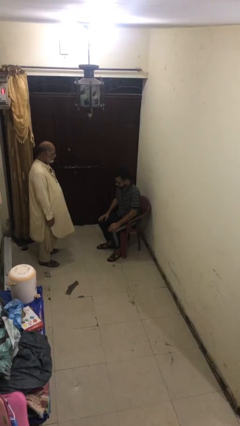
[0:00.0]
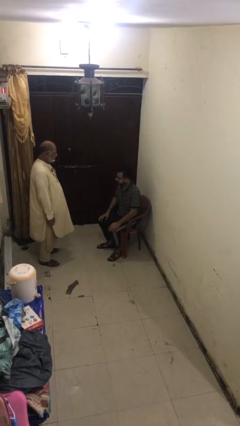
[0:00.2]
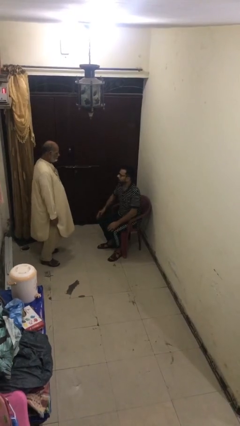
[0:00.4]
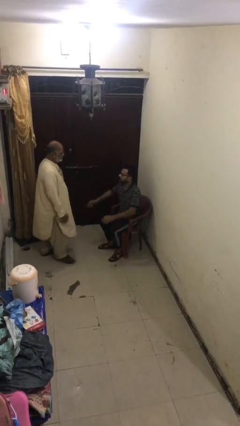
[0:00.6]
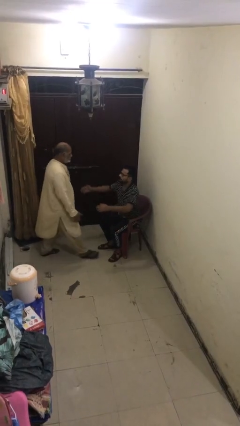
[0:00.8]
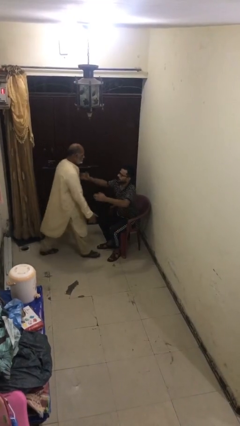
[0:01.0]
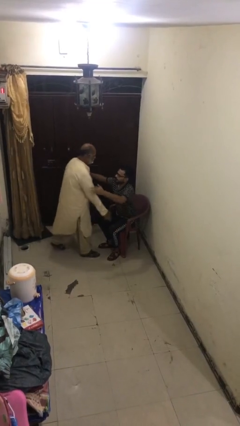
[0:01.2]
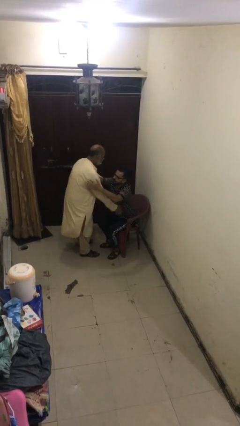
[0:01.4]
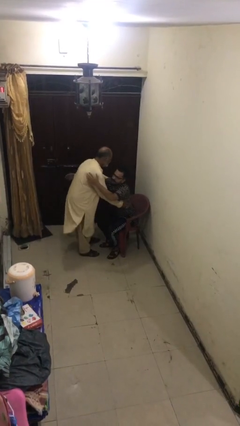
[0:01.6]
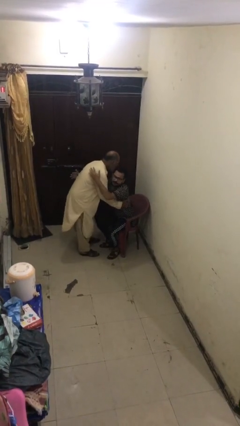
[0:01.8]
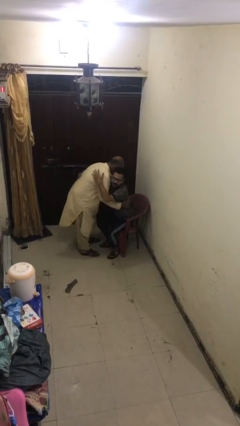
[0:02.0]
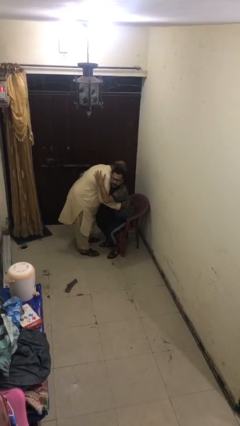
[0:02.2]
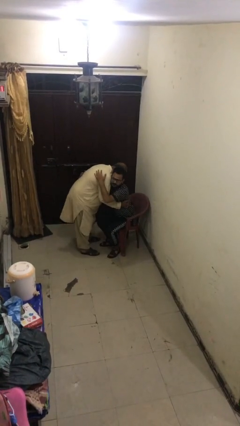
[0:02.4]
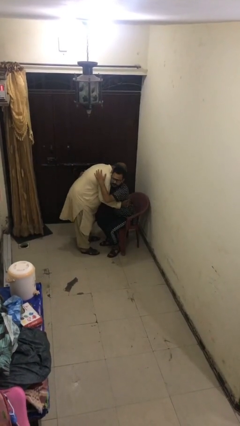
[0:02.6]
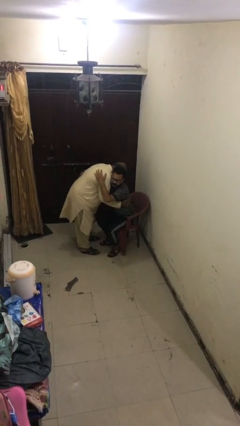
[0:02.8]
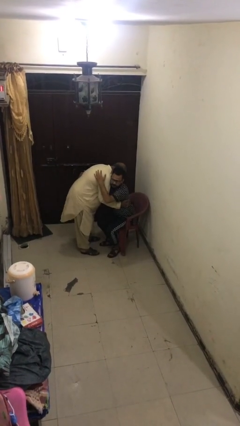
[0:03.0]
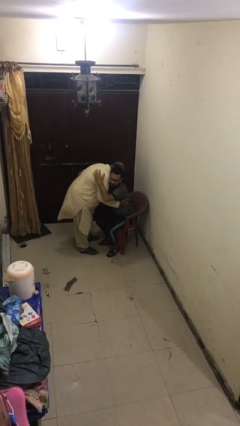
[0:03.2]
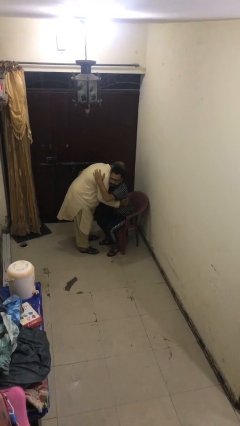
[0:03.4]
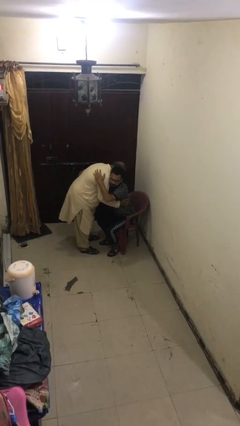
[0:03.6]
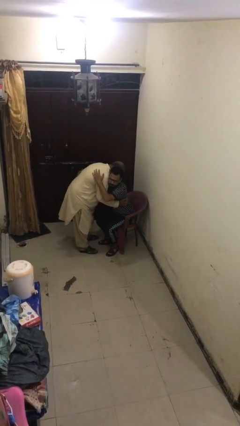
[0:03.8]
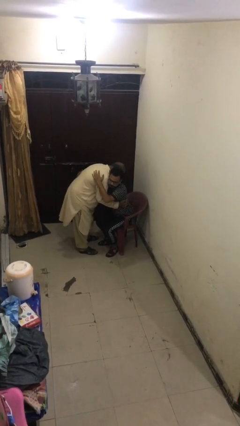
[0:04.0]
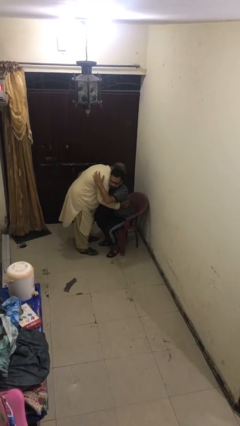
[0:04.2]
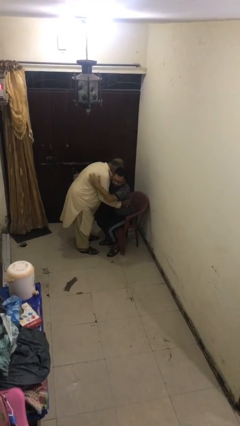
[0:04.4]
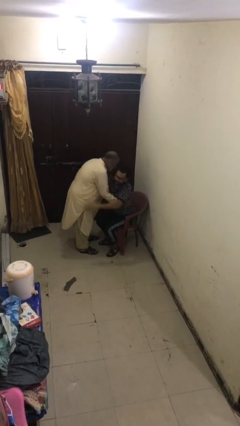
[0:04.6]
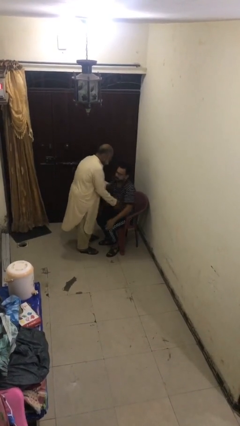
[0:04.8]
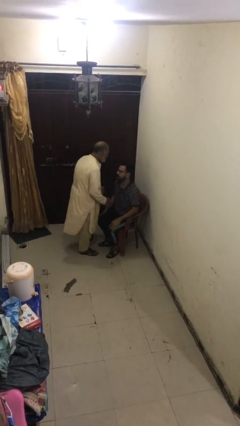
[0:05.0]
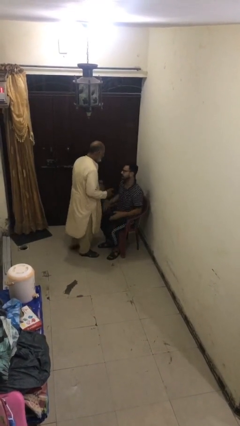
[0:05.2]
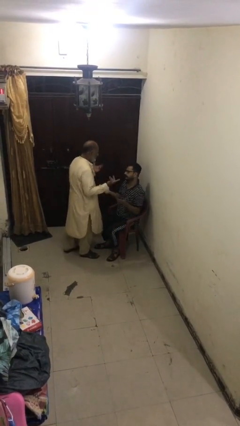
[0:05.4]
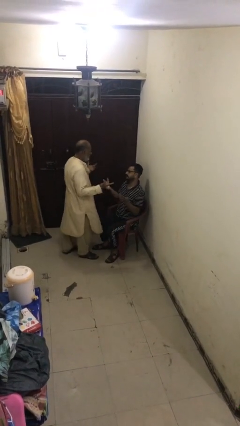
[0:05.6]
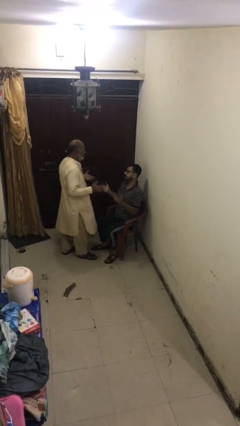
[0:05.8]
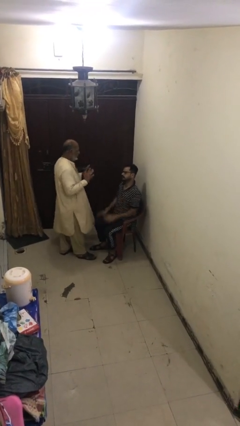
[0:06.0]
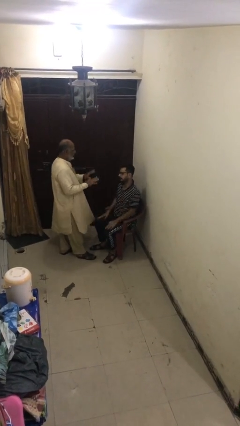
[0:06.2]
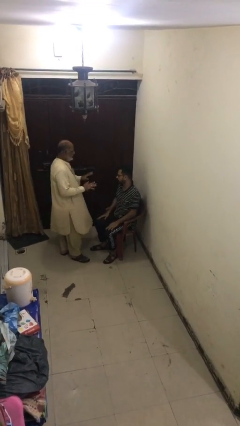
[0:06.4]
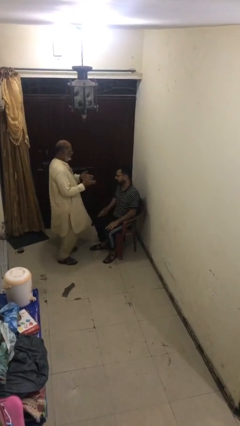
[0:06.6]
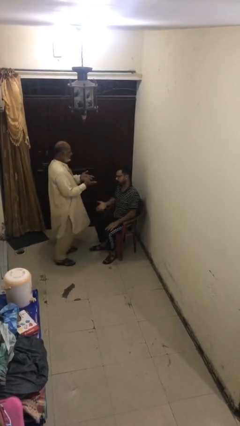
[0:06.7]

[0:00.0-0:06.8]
person embraces person

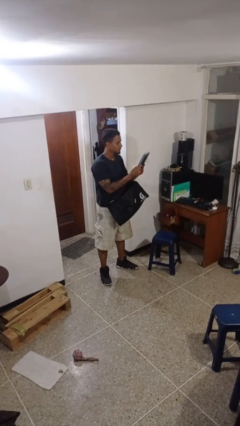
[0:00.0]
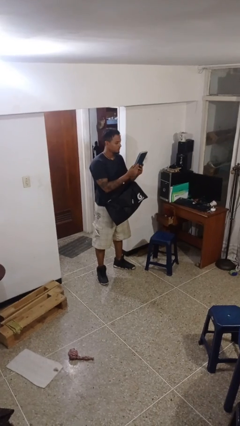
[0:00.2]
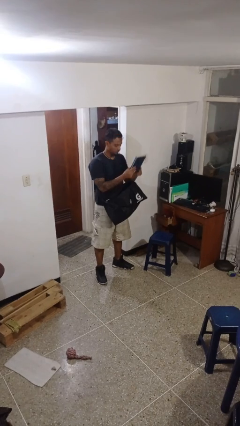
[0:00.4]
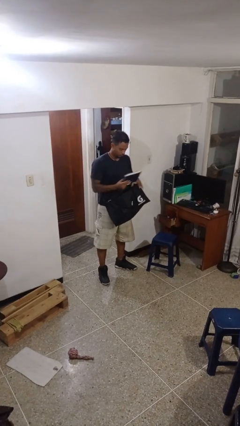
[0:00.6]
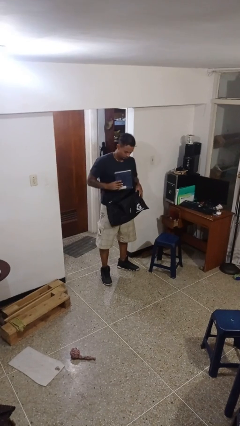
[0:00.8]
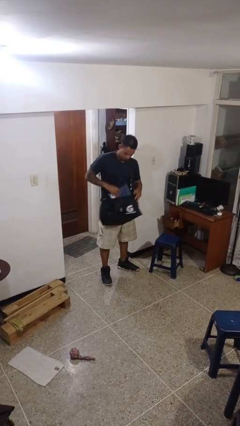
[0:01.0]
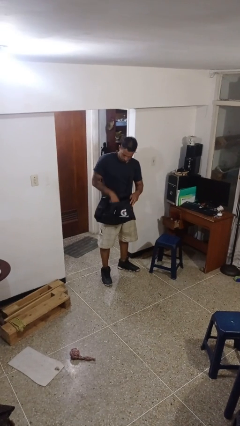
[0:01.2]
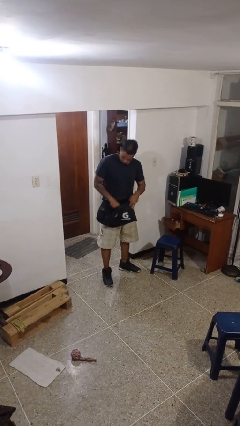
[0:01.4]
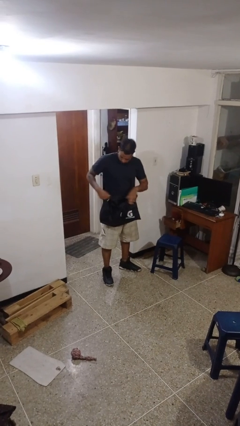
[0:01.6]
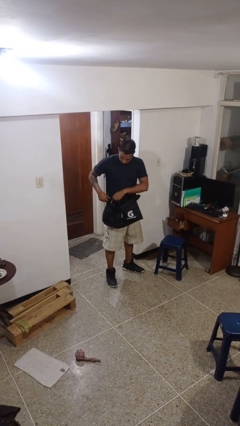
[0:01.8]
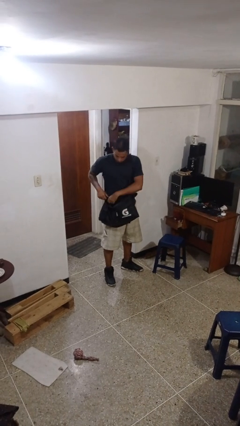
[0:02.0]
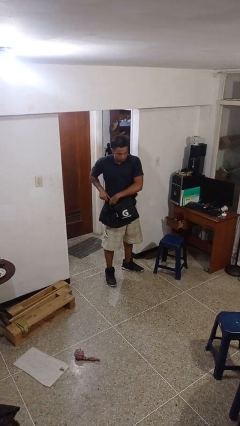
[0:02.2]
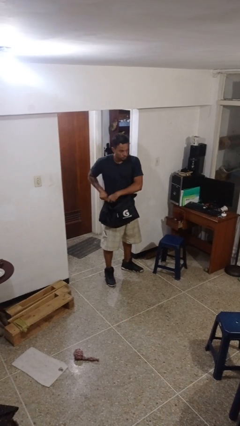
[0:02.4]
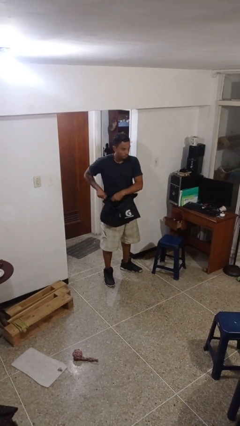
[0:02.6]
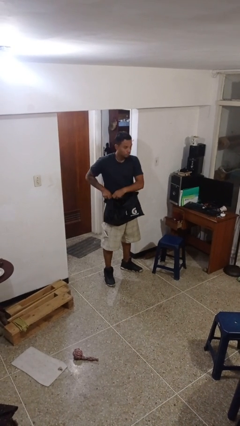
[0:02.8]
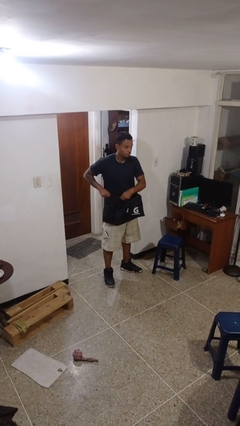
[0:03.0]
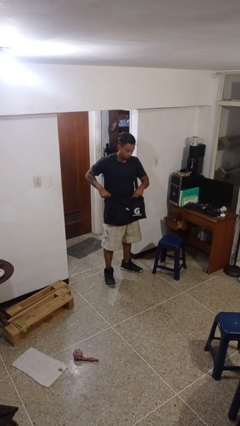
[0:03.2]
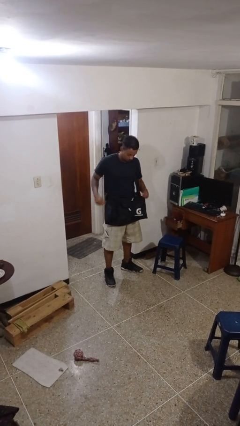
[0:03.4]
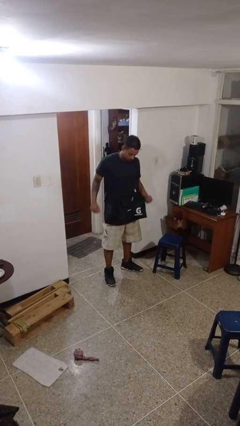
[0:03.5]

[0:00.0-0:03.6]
person puts object into purse

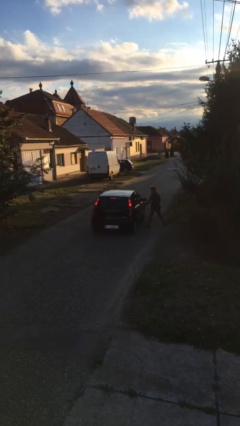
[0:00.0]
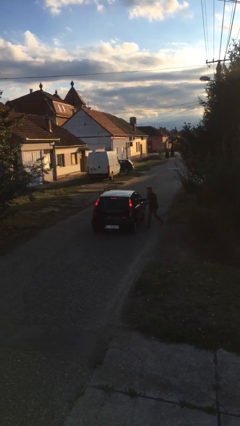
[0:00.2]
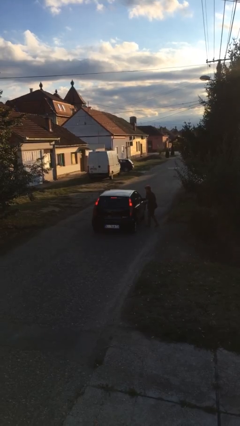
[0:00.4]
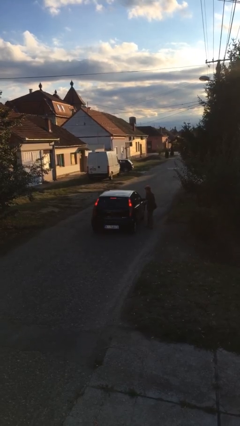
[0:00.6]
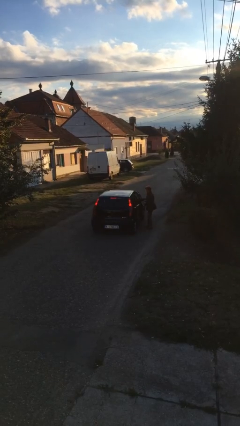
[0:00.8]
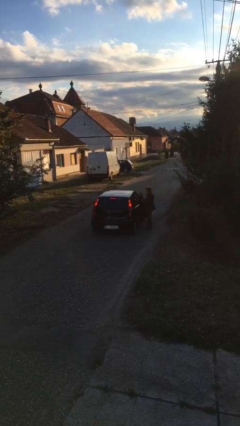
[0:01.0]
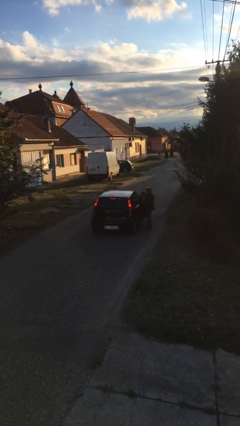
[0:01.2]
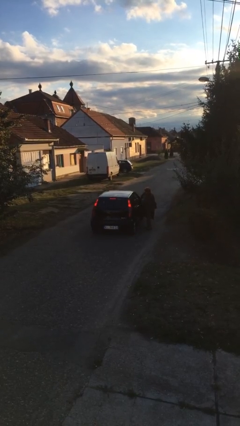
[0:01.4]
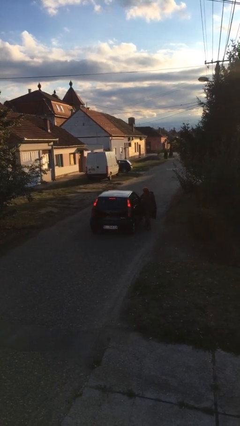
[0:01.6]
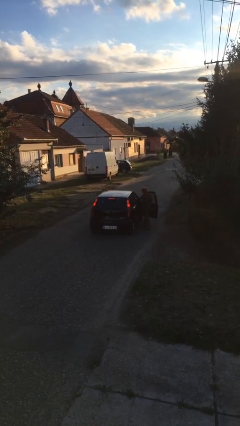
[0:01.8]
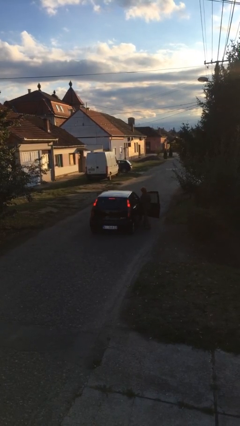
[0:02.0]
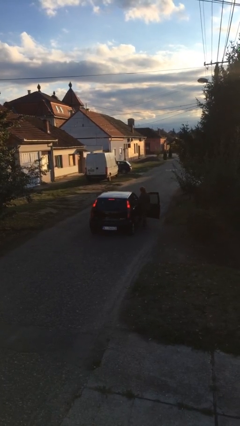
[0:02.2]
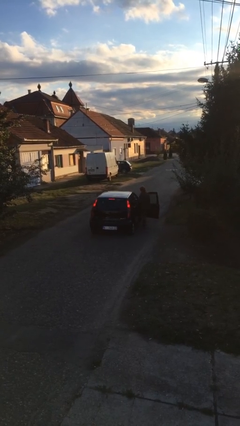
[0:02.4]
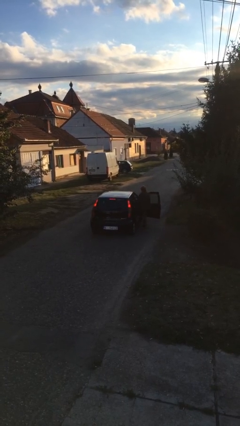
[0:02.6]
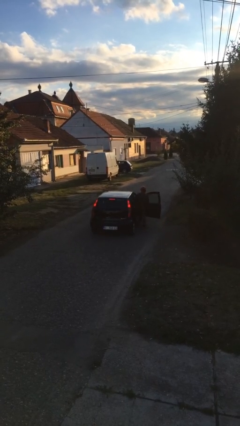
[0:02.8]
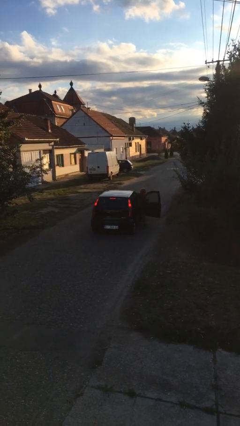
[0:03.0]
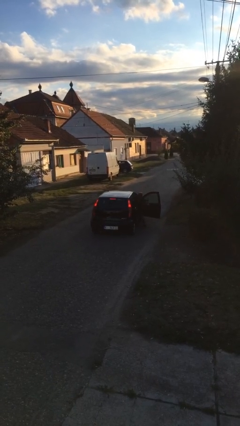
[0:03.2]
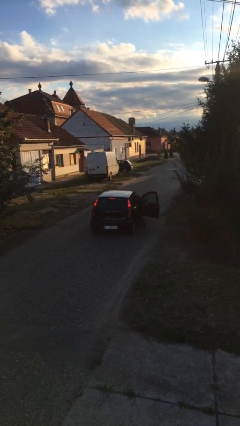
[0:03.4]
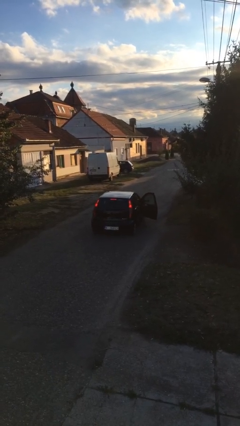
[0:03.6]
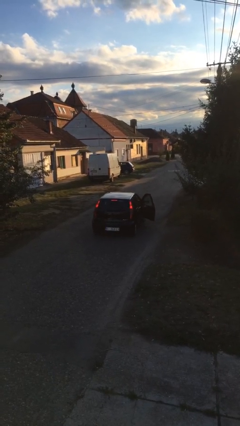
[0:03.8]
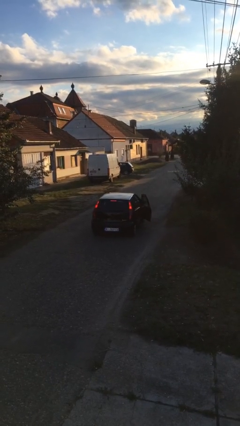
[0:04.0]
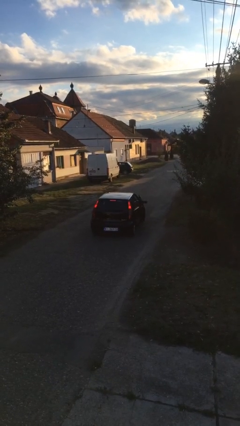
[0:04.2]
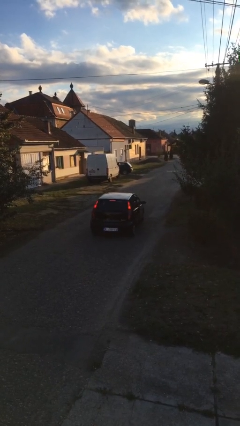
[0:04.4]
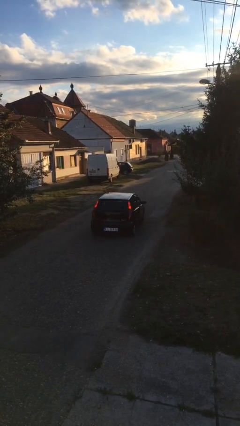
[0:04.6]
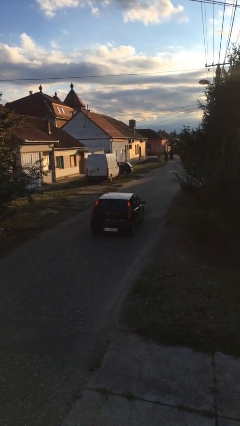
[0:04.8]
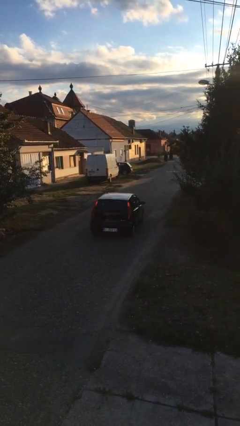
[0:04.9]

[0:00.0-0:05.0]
car picks up person

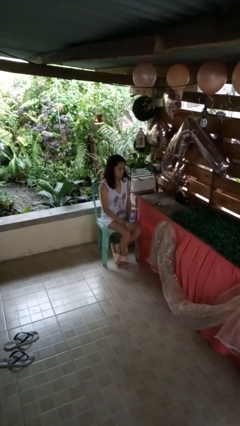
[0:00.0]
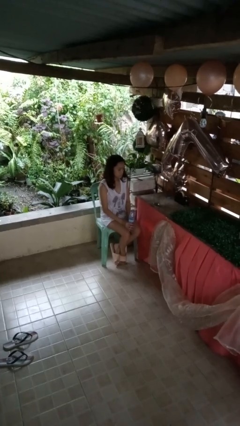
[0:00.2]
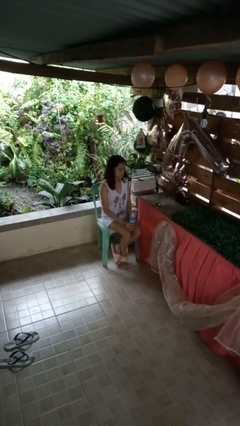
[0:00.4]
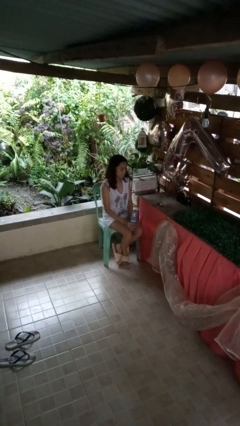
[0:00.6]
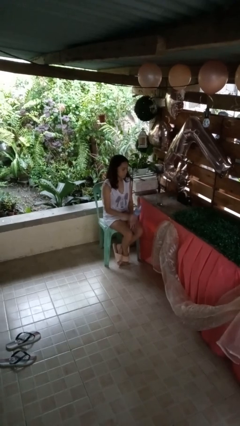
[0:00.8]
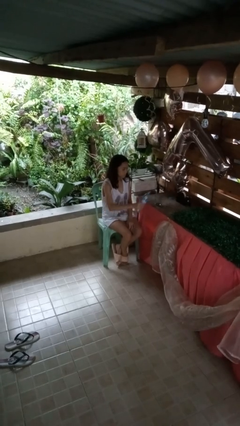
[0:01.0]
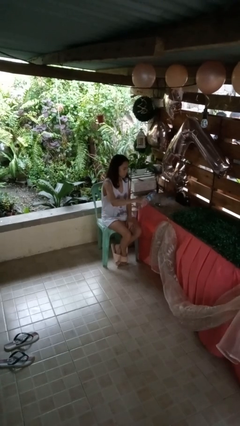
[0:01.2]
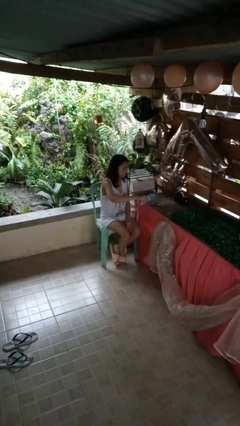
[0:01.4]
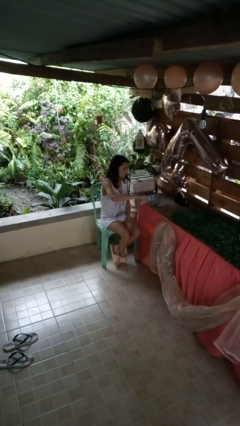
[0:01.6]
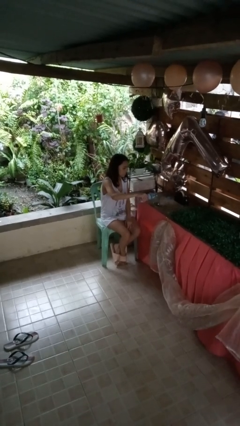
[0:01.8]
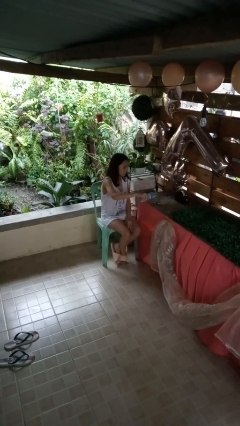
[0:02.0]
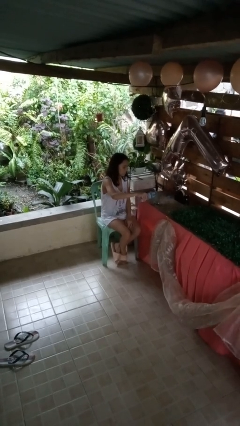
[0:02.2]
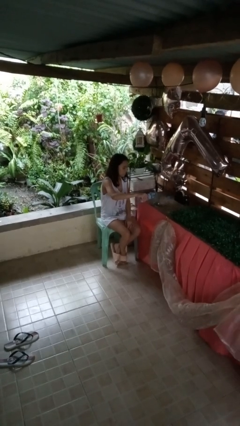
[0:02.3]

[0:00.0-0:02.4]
person pours liquid into cup

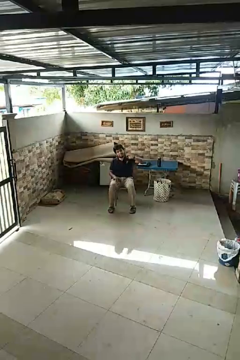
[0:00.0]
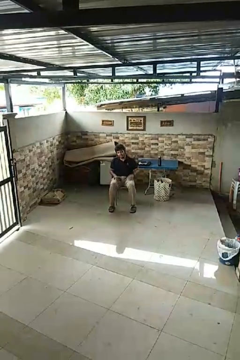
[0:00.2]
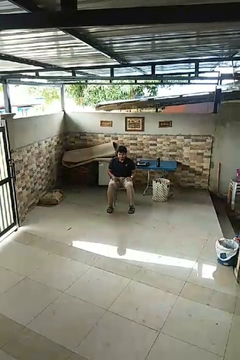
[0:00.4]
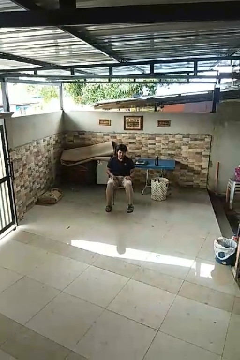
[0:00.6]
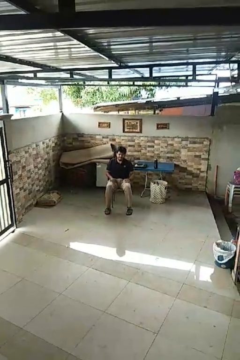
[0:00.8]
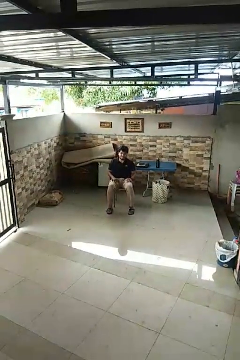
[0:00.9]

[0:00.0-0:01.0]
person gestures lower hand
